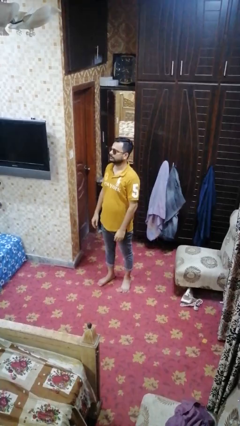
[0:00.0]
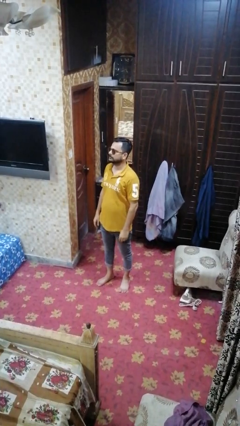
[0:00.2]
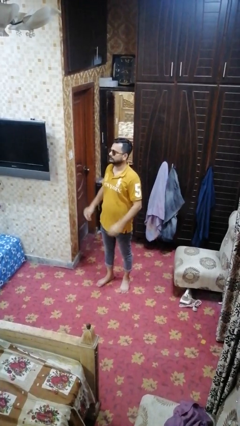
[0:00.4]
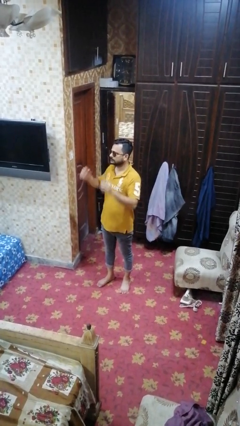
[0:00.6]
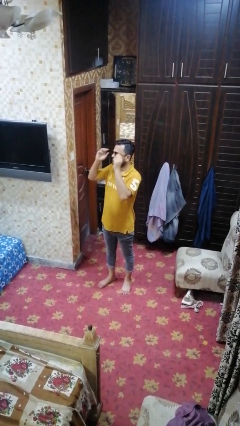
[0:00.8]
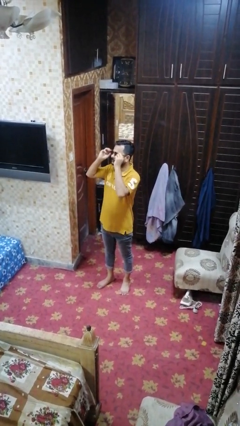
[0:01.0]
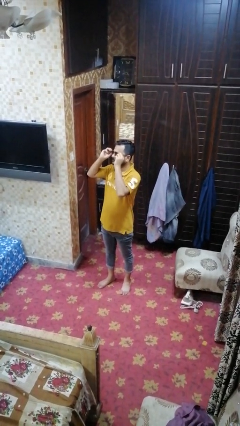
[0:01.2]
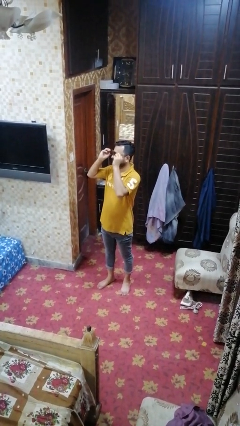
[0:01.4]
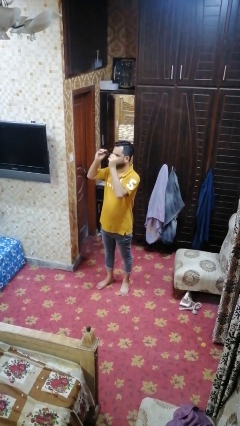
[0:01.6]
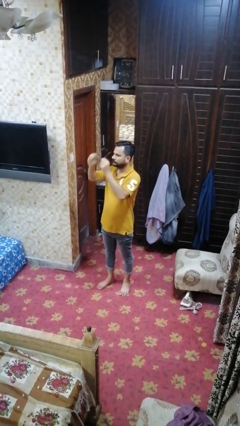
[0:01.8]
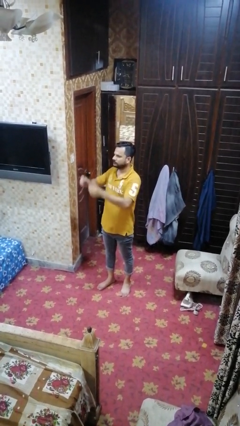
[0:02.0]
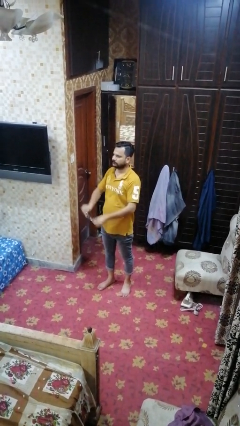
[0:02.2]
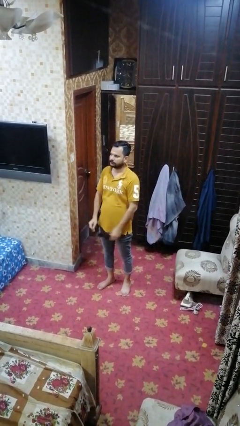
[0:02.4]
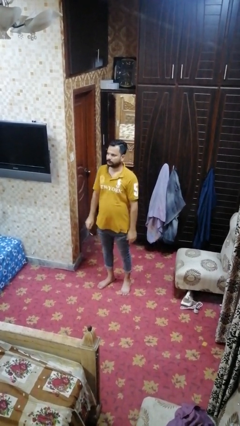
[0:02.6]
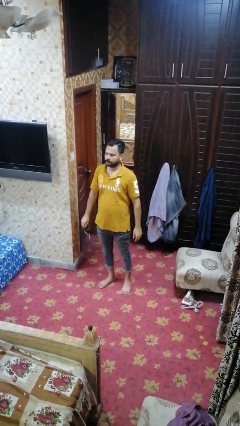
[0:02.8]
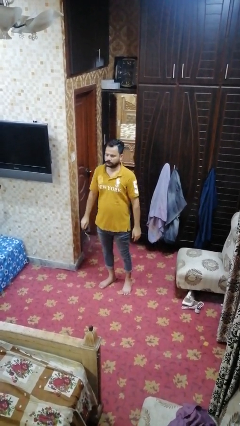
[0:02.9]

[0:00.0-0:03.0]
person takes off sunglasses

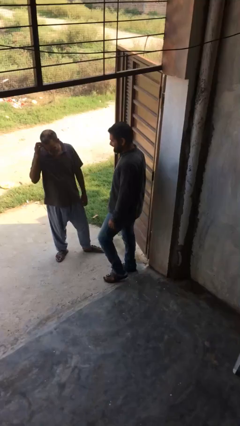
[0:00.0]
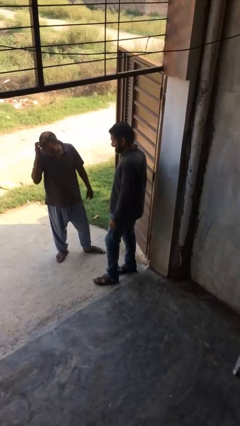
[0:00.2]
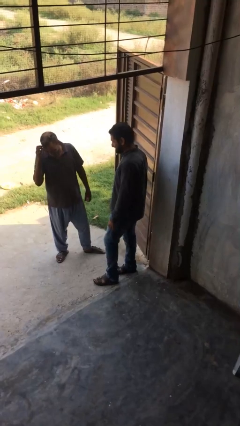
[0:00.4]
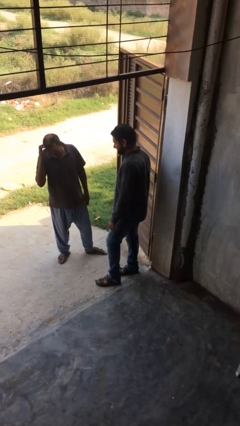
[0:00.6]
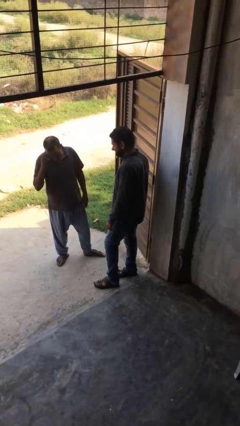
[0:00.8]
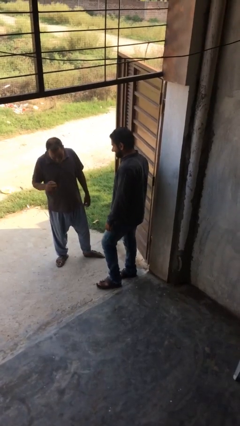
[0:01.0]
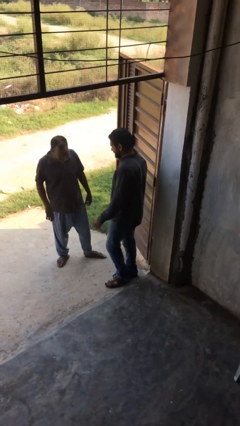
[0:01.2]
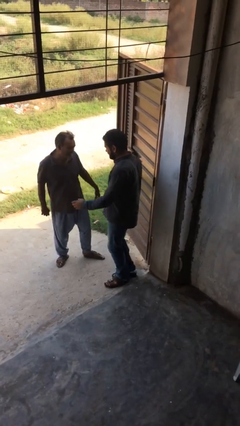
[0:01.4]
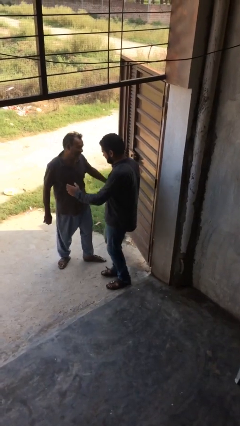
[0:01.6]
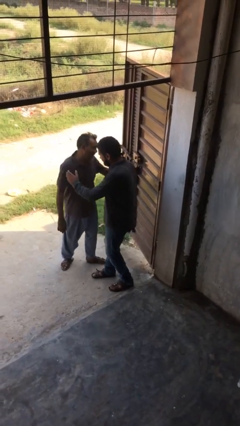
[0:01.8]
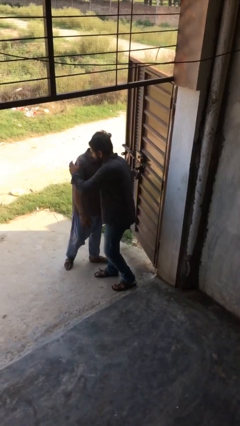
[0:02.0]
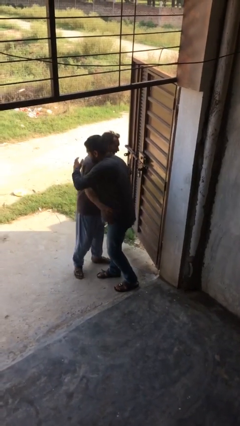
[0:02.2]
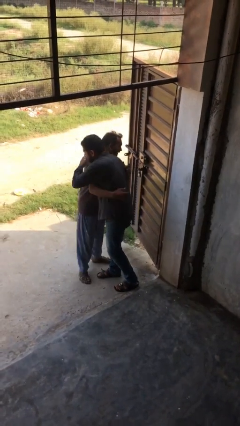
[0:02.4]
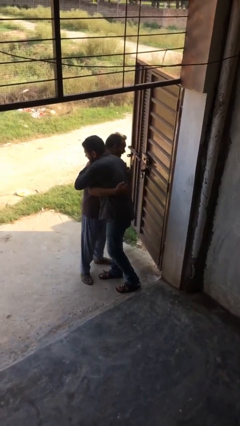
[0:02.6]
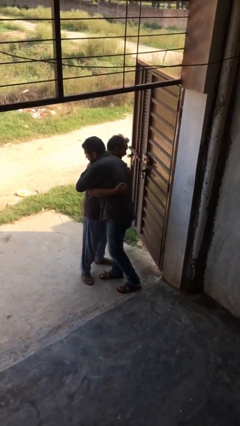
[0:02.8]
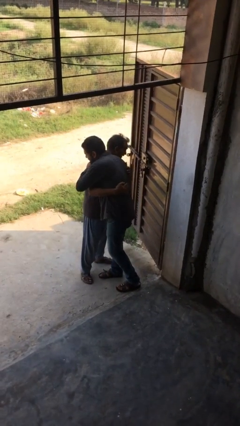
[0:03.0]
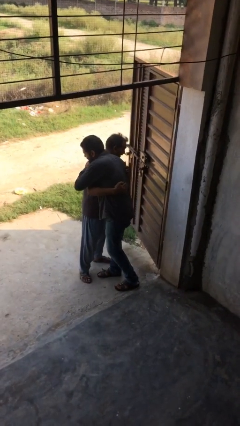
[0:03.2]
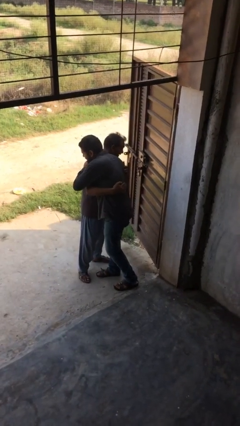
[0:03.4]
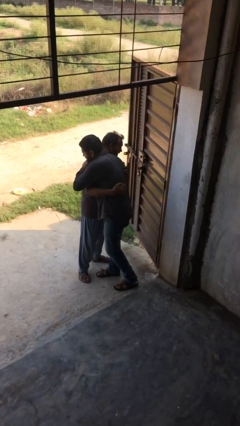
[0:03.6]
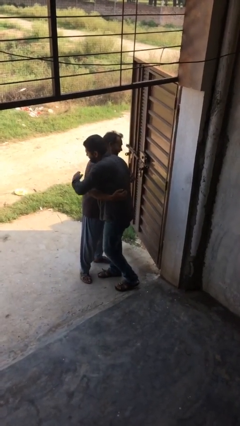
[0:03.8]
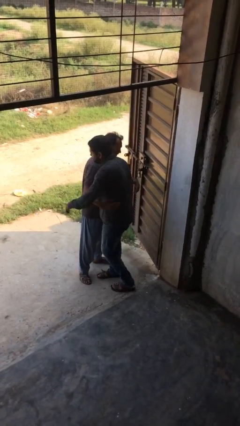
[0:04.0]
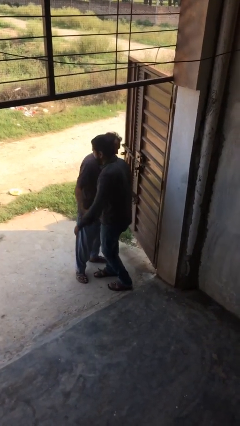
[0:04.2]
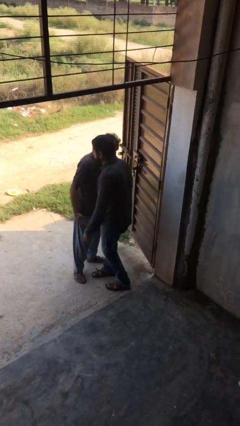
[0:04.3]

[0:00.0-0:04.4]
person embraces person

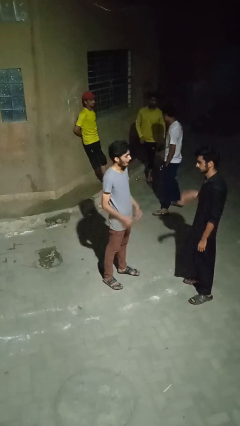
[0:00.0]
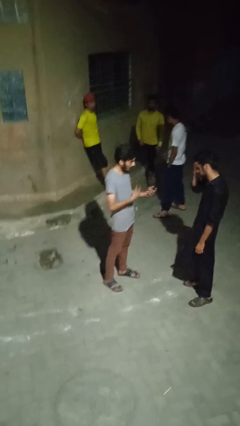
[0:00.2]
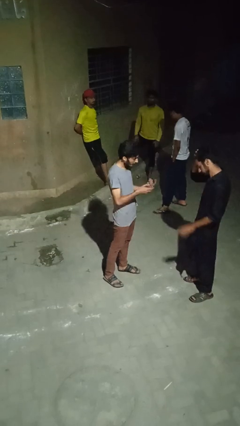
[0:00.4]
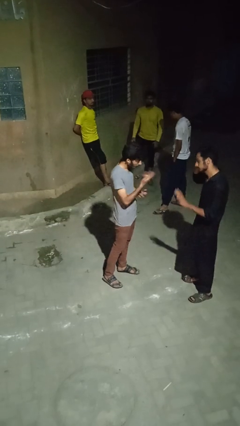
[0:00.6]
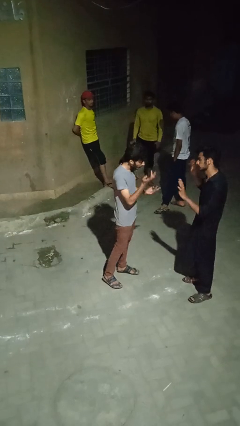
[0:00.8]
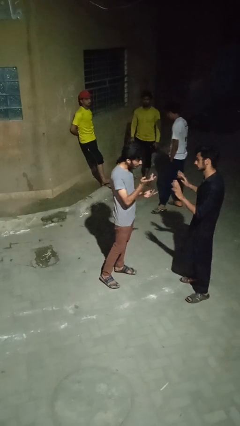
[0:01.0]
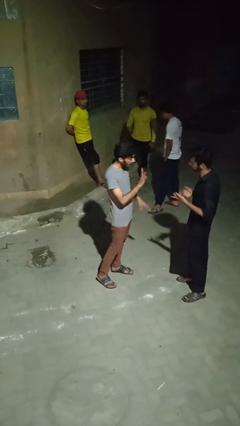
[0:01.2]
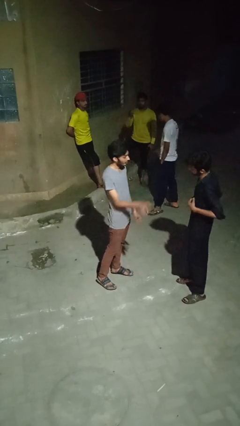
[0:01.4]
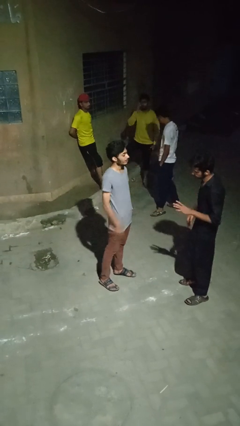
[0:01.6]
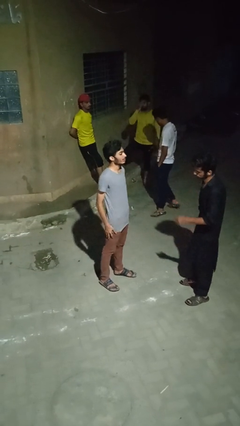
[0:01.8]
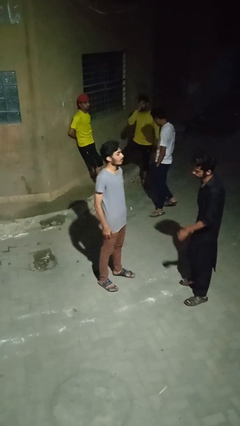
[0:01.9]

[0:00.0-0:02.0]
person talks to person

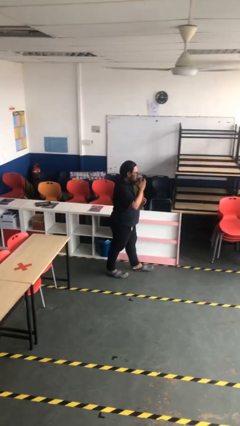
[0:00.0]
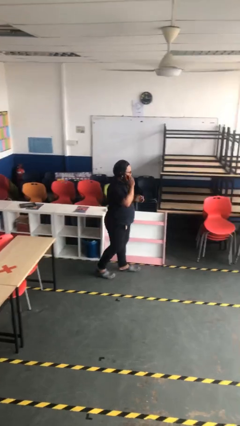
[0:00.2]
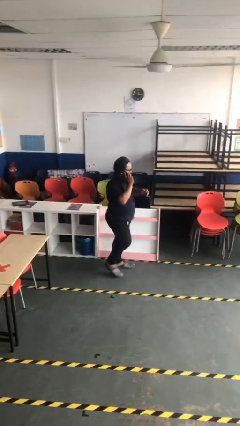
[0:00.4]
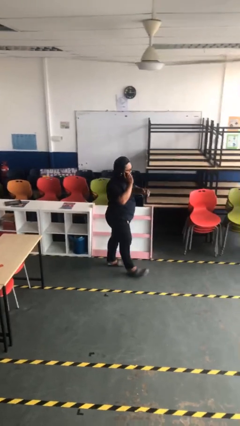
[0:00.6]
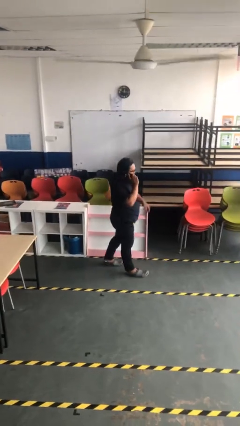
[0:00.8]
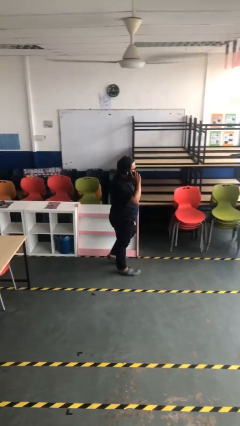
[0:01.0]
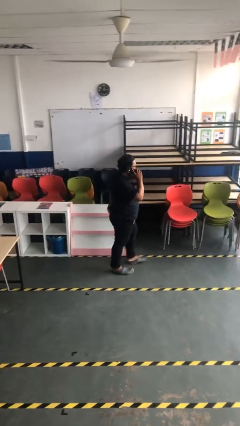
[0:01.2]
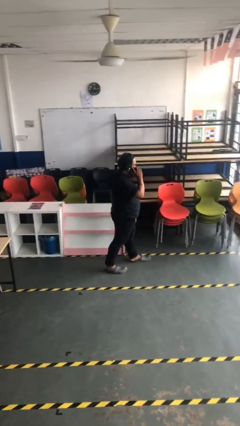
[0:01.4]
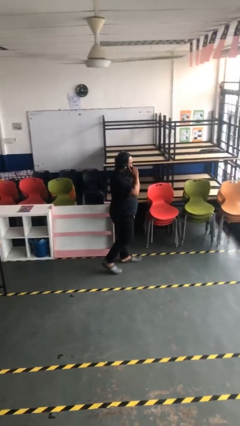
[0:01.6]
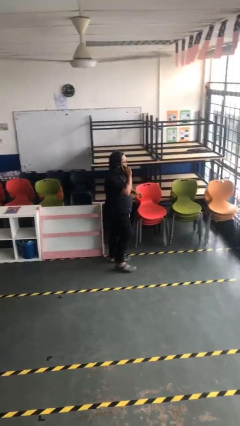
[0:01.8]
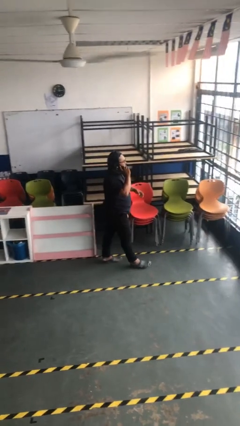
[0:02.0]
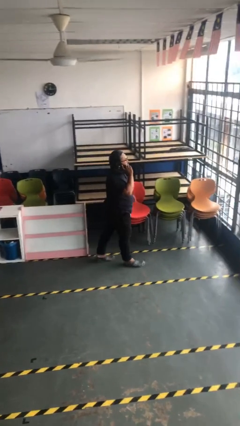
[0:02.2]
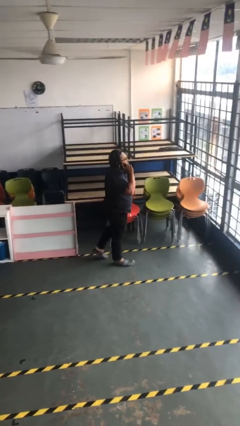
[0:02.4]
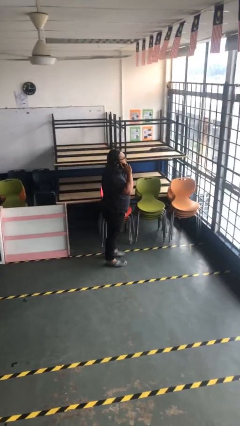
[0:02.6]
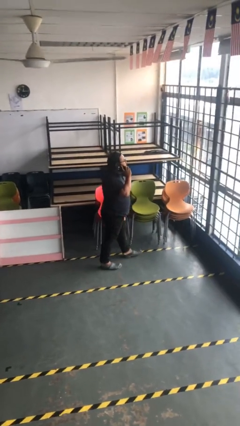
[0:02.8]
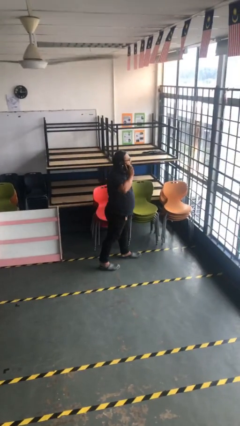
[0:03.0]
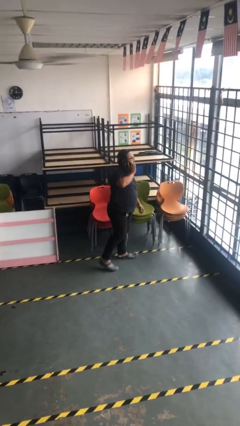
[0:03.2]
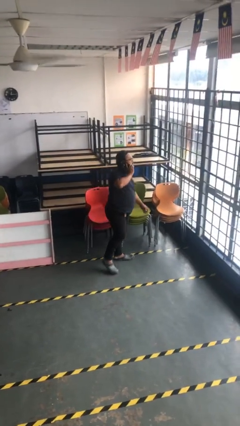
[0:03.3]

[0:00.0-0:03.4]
person talks on phone

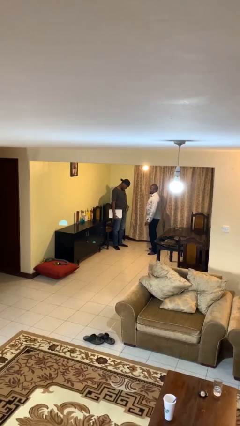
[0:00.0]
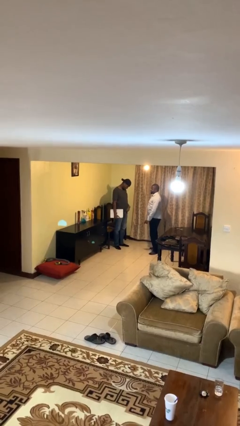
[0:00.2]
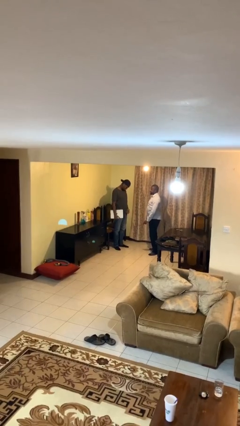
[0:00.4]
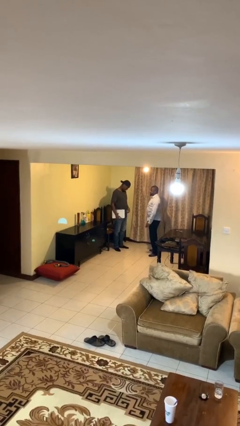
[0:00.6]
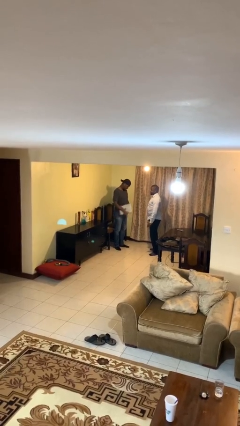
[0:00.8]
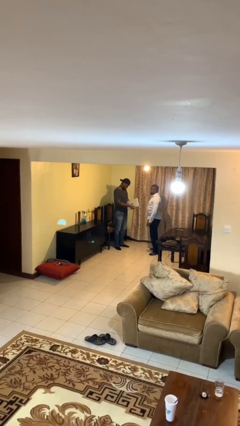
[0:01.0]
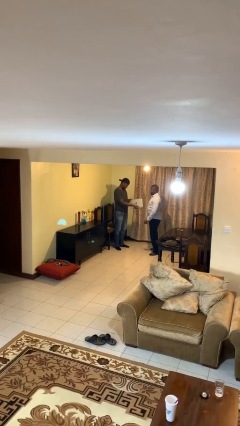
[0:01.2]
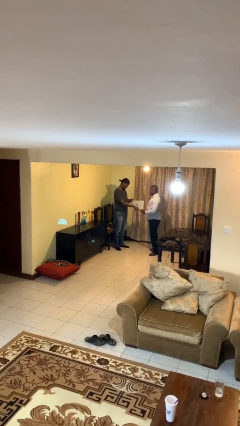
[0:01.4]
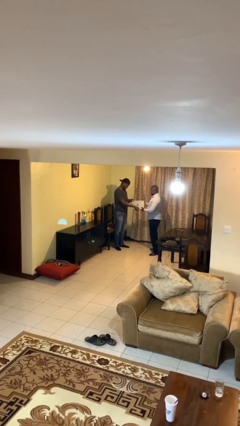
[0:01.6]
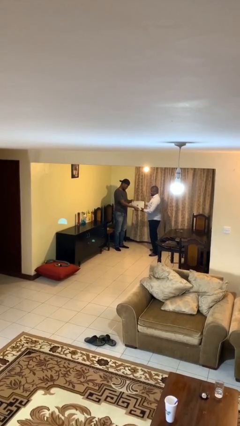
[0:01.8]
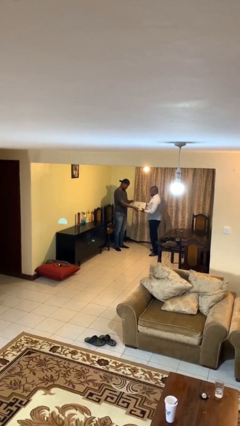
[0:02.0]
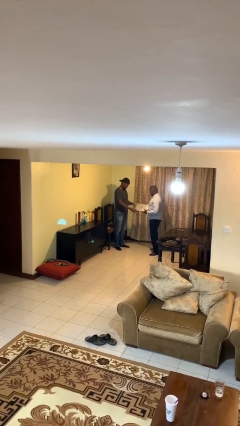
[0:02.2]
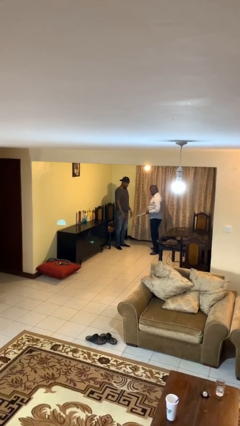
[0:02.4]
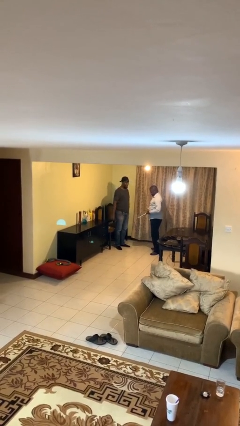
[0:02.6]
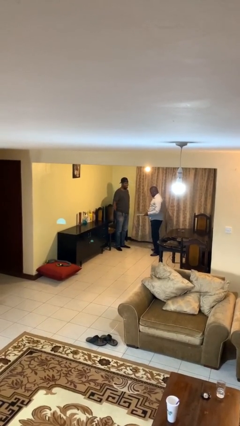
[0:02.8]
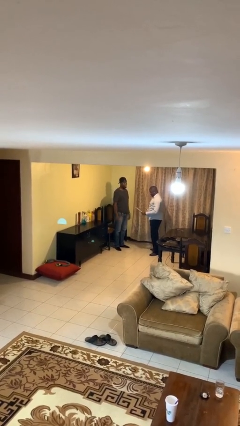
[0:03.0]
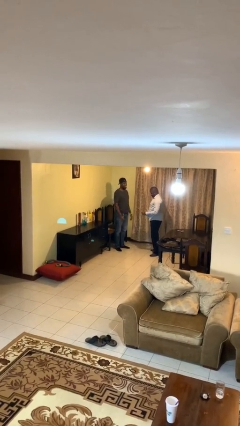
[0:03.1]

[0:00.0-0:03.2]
person transfers object to person

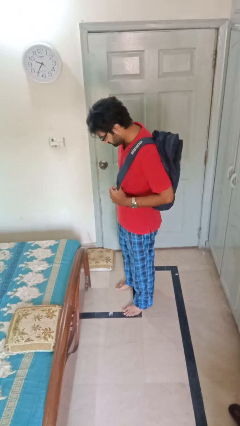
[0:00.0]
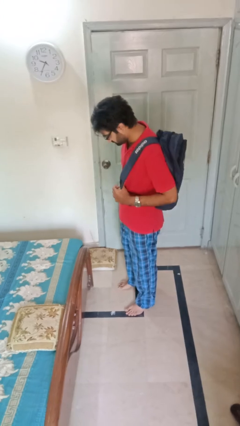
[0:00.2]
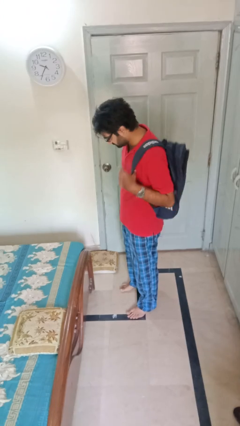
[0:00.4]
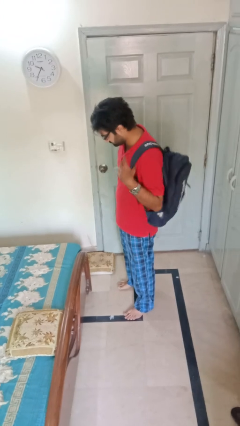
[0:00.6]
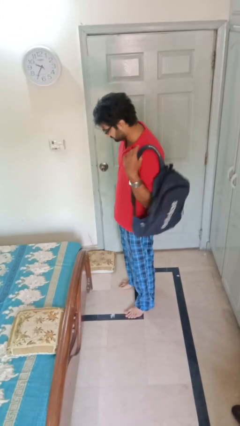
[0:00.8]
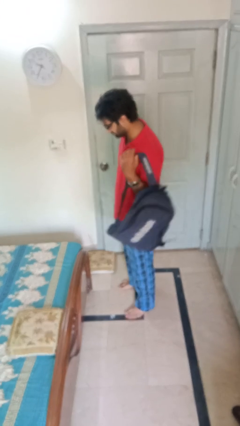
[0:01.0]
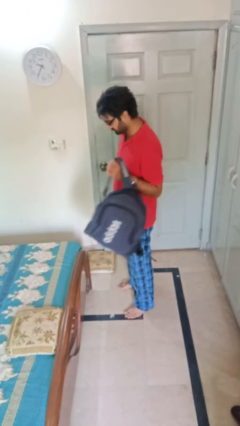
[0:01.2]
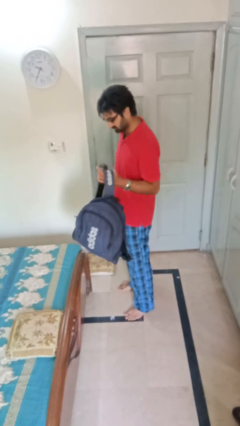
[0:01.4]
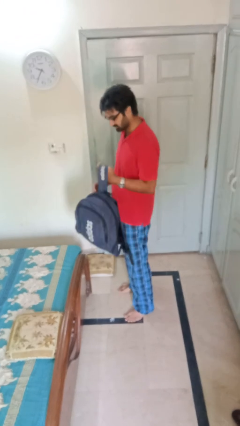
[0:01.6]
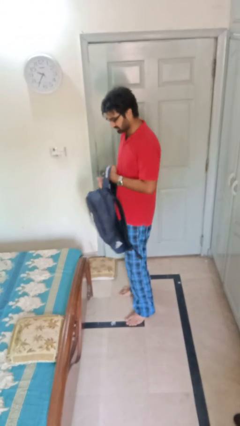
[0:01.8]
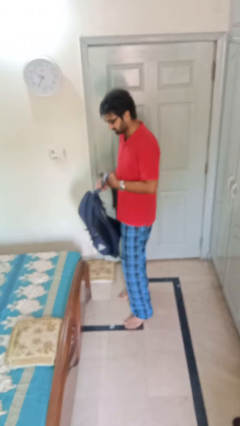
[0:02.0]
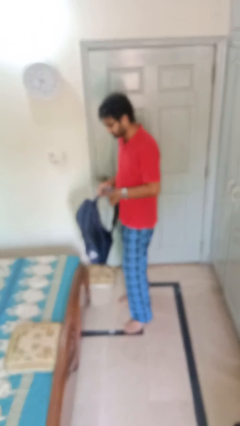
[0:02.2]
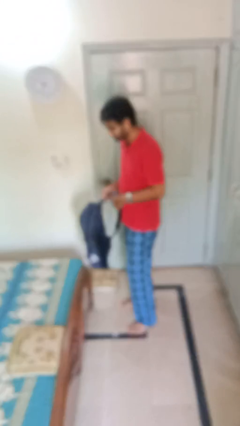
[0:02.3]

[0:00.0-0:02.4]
person takes off backpack
